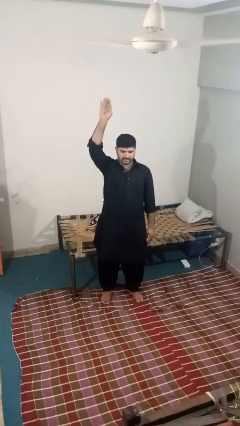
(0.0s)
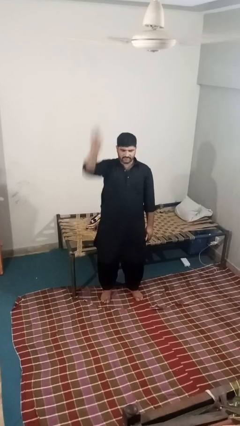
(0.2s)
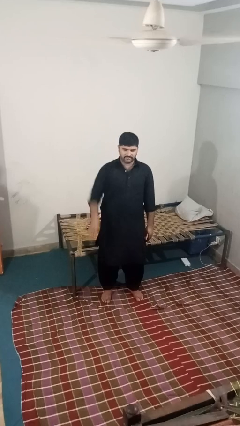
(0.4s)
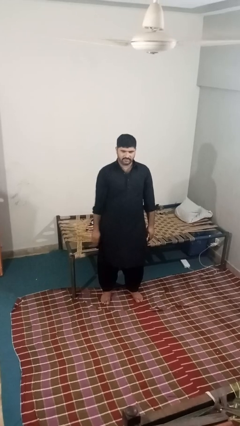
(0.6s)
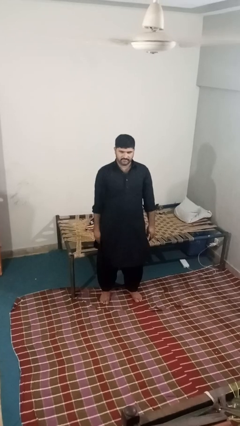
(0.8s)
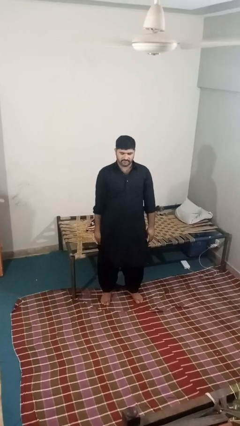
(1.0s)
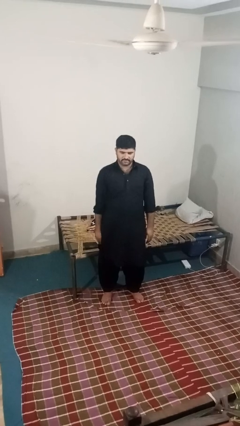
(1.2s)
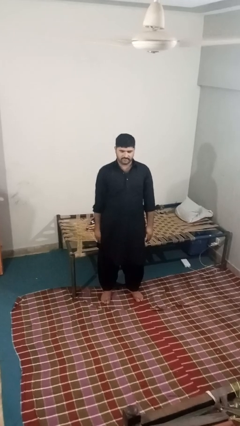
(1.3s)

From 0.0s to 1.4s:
person gestures lower hand

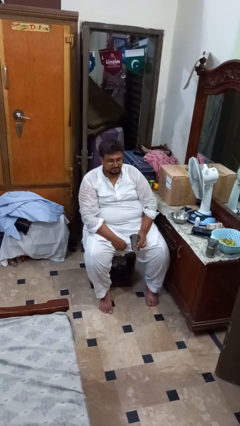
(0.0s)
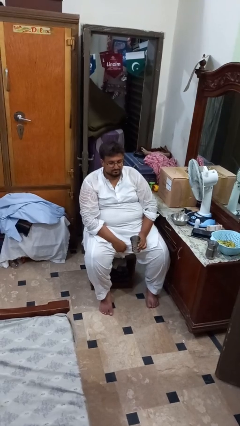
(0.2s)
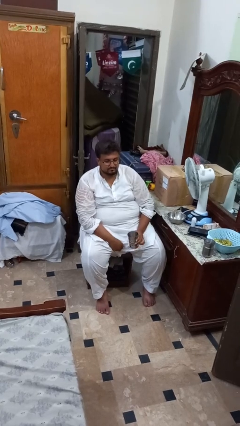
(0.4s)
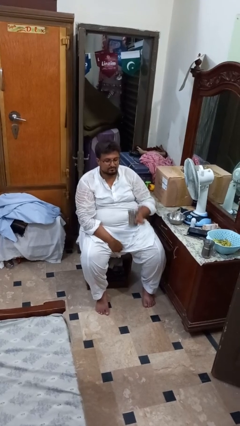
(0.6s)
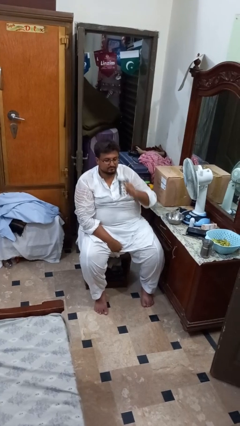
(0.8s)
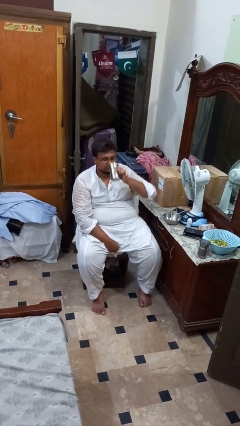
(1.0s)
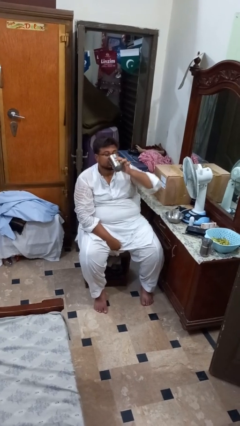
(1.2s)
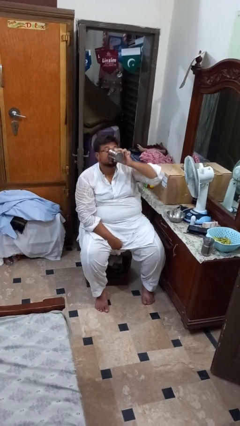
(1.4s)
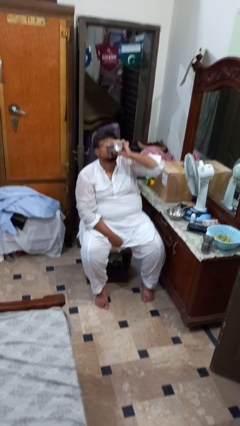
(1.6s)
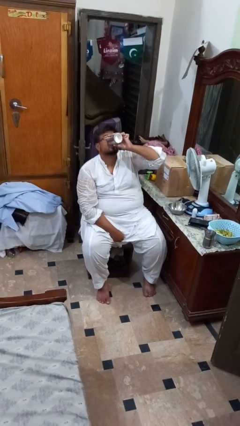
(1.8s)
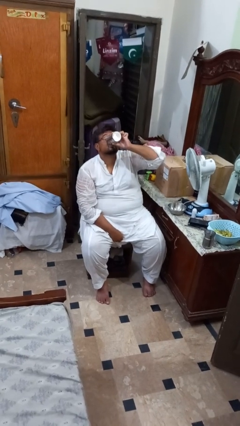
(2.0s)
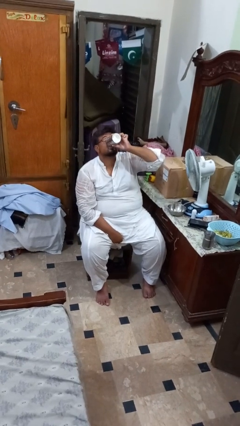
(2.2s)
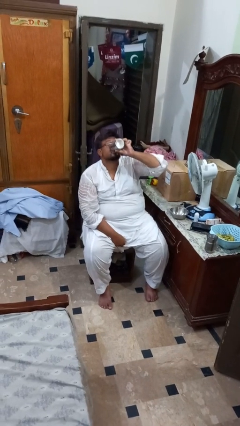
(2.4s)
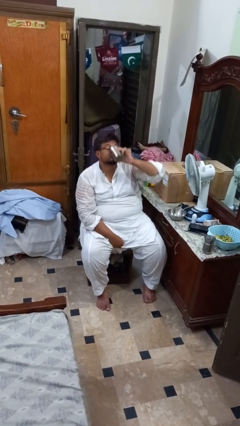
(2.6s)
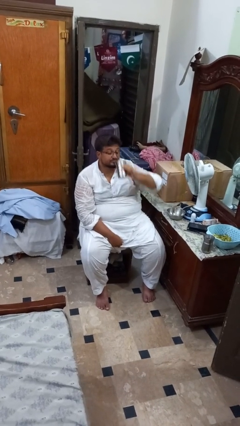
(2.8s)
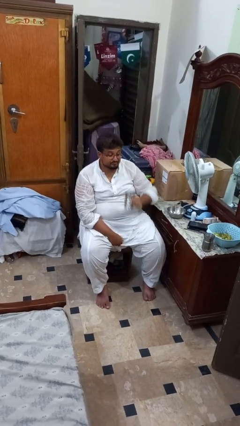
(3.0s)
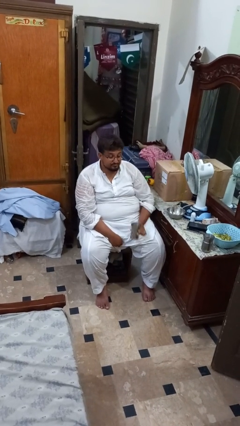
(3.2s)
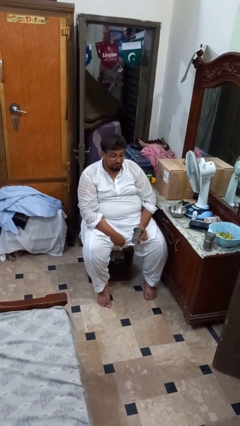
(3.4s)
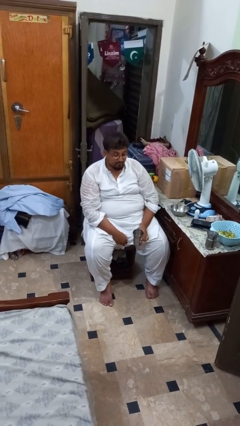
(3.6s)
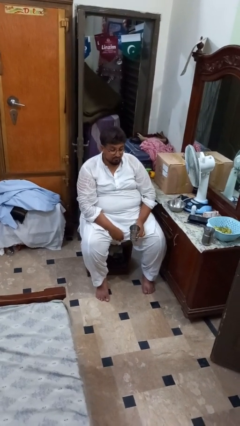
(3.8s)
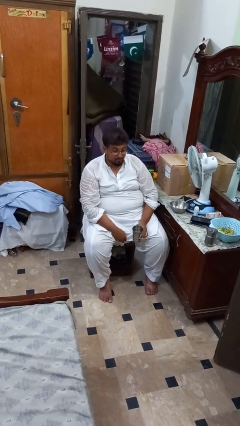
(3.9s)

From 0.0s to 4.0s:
person drinks from cup

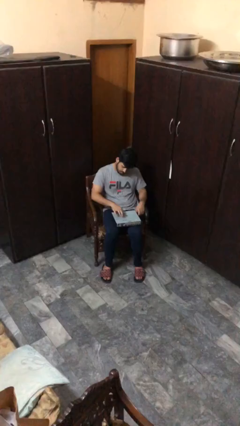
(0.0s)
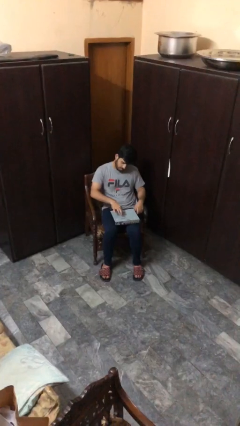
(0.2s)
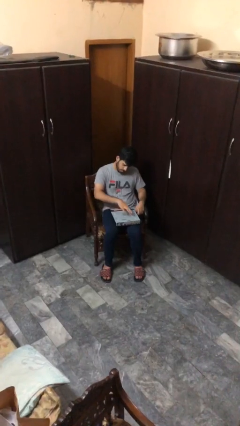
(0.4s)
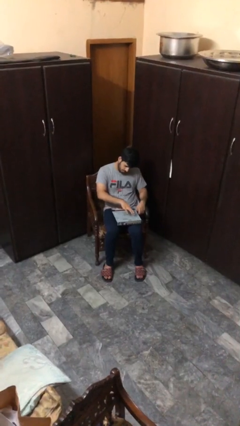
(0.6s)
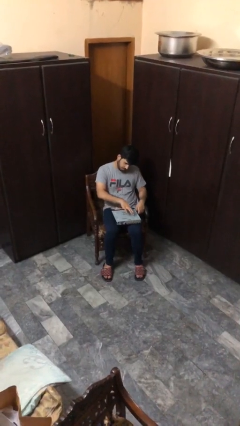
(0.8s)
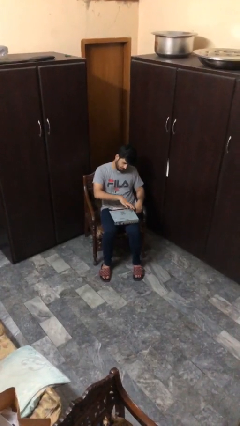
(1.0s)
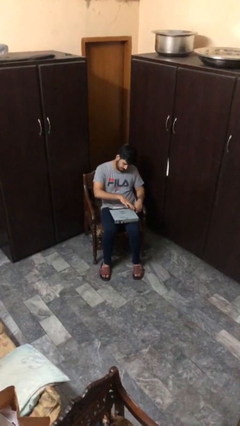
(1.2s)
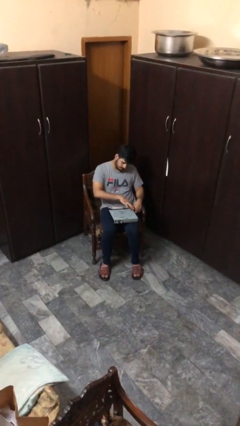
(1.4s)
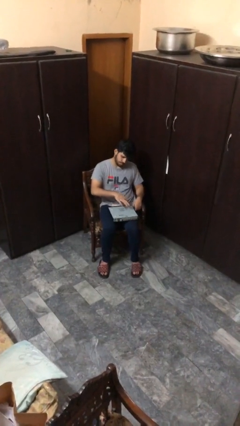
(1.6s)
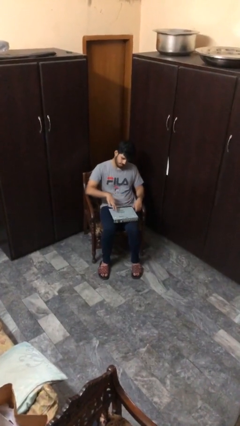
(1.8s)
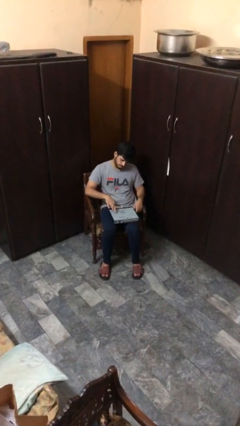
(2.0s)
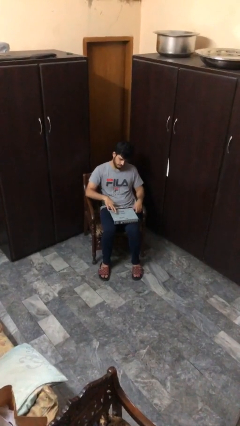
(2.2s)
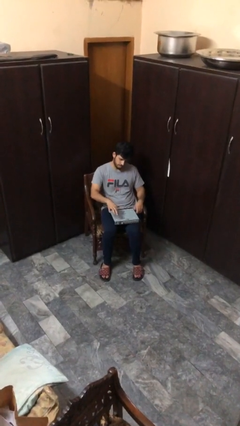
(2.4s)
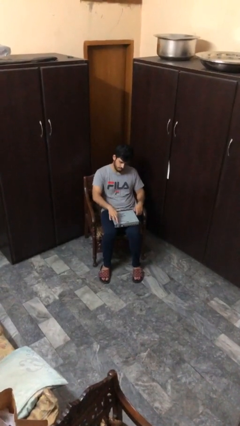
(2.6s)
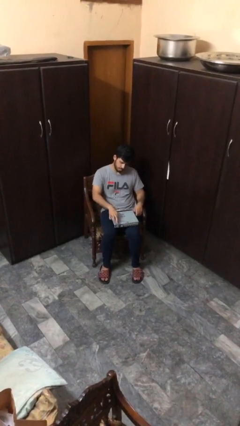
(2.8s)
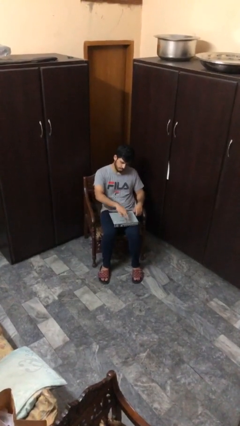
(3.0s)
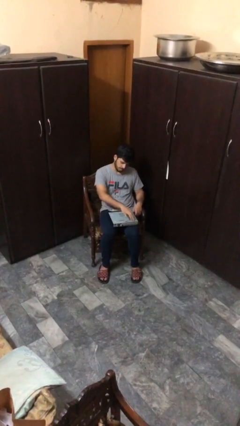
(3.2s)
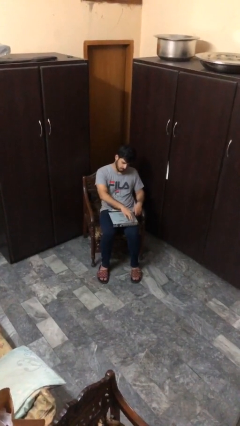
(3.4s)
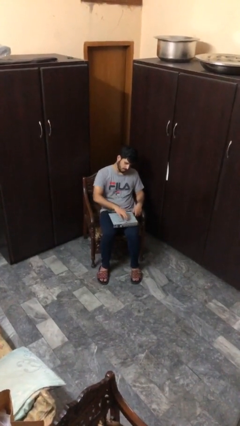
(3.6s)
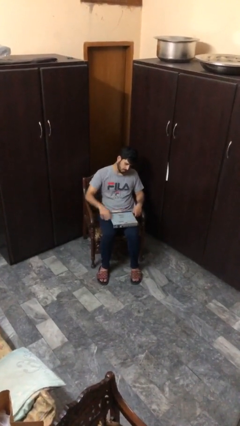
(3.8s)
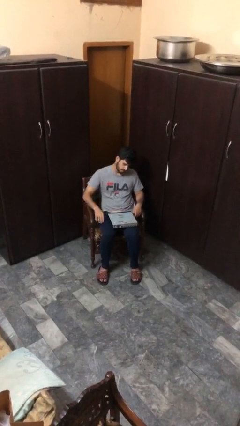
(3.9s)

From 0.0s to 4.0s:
person taps object with finger

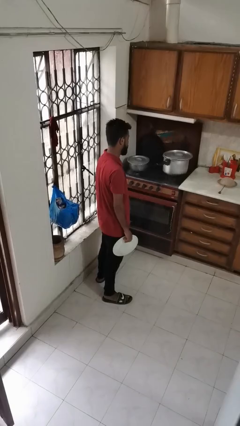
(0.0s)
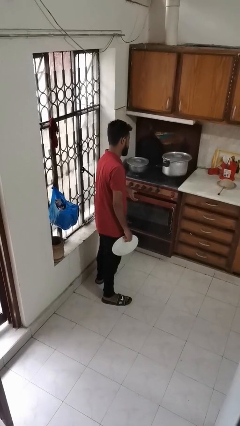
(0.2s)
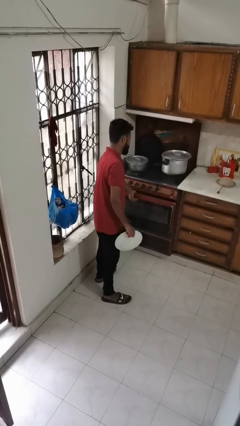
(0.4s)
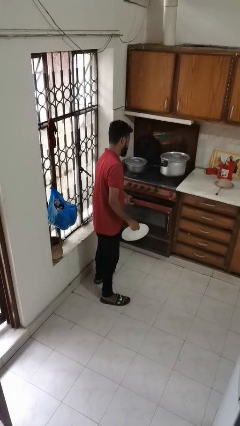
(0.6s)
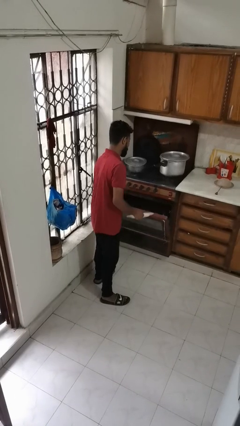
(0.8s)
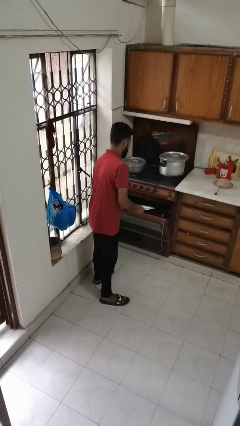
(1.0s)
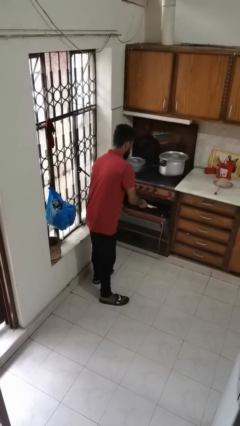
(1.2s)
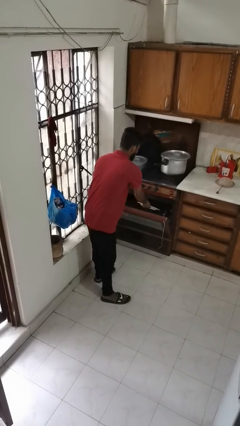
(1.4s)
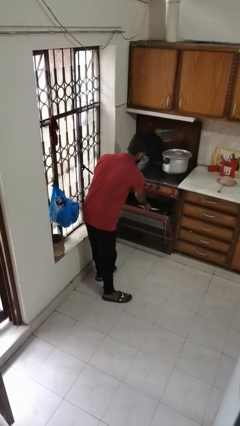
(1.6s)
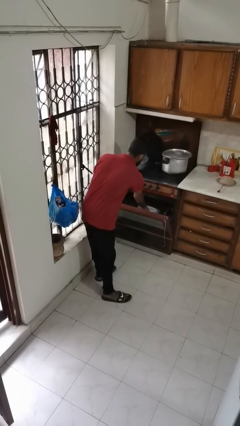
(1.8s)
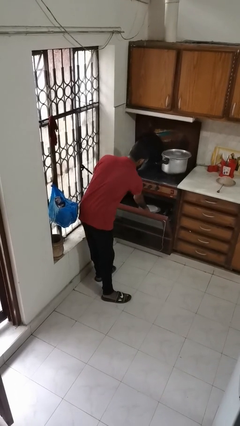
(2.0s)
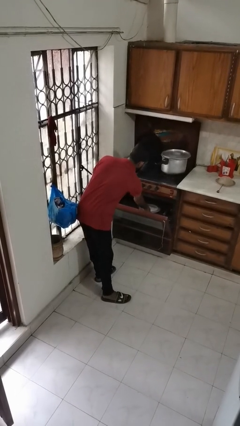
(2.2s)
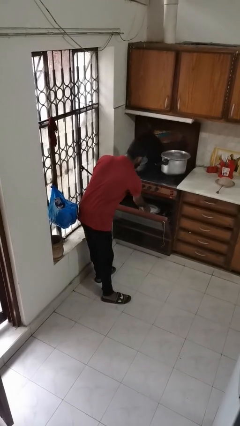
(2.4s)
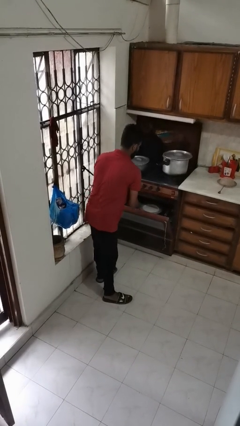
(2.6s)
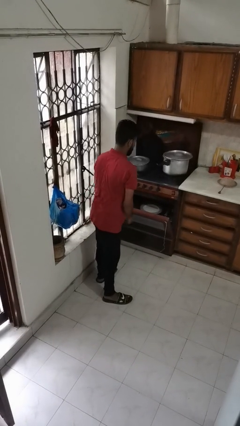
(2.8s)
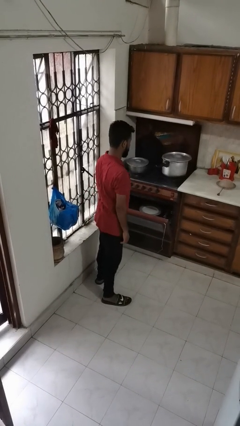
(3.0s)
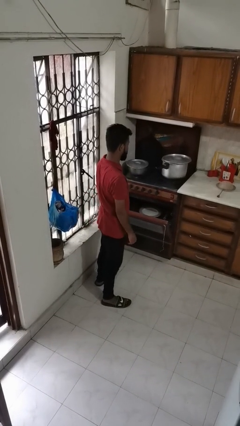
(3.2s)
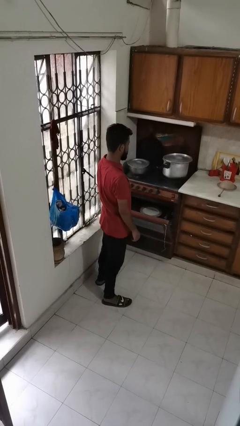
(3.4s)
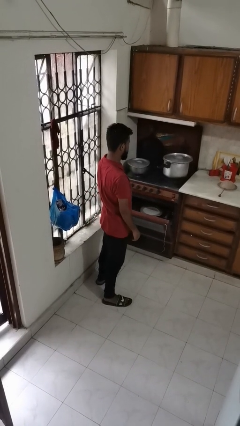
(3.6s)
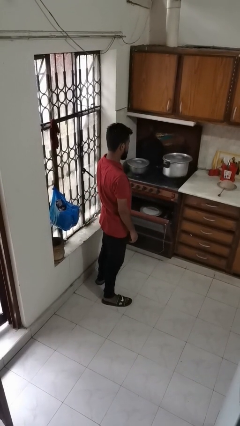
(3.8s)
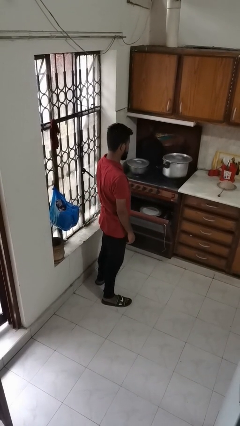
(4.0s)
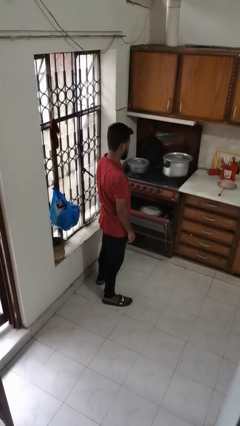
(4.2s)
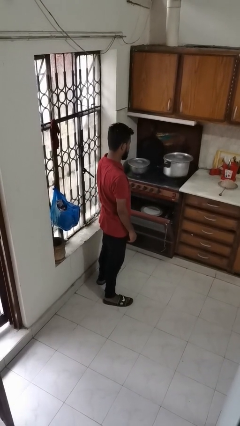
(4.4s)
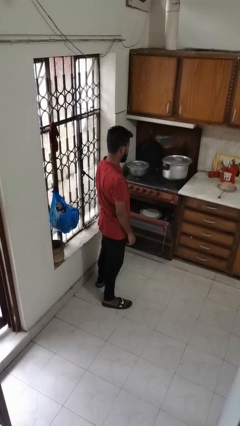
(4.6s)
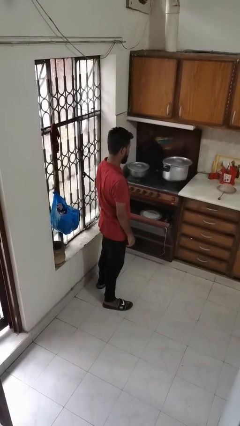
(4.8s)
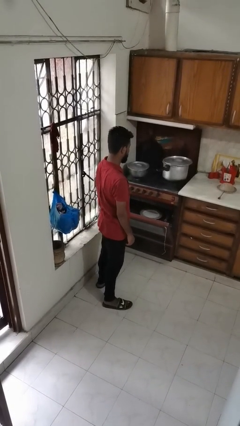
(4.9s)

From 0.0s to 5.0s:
person puts object into oven

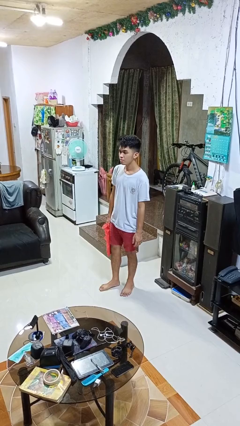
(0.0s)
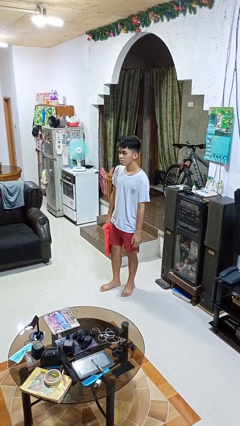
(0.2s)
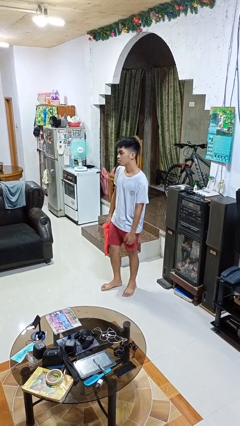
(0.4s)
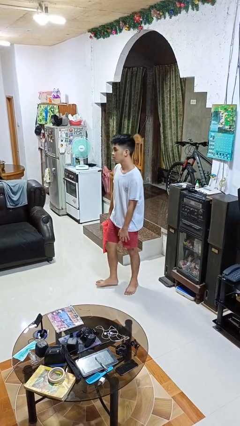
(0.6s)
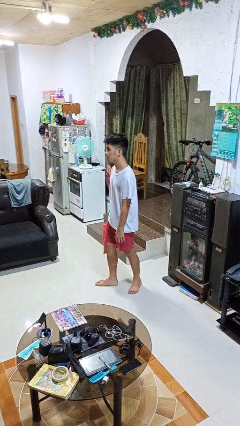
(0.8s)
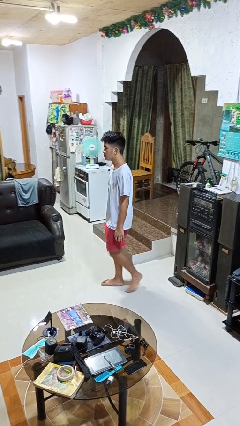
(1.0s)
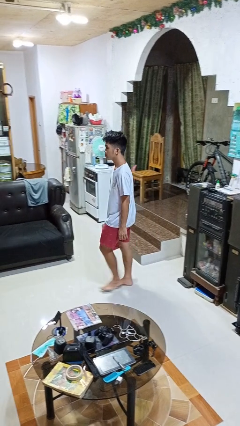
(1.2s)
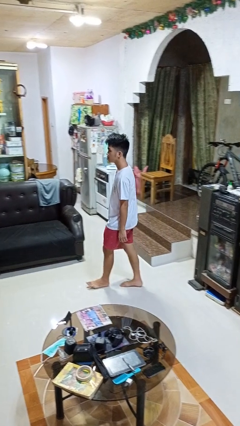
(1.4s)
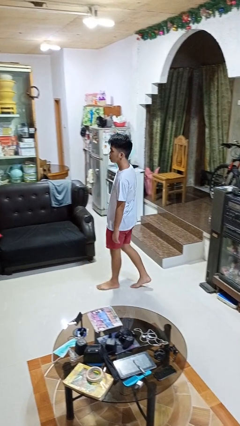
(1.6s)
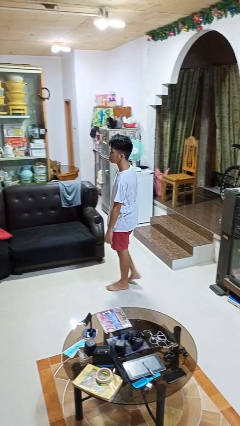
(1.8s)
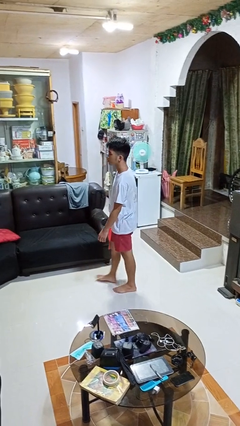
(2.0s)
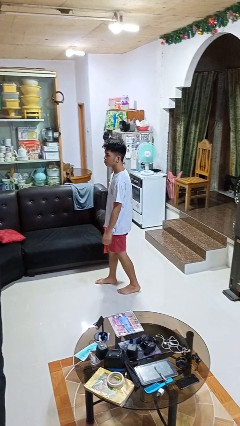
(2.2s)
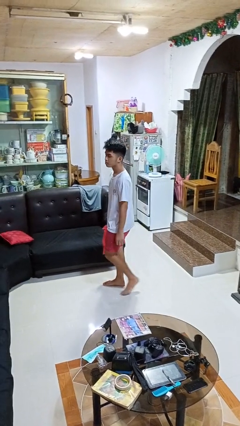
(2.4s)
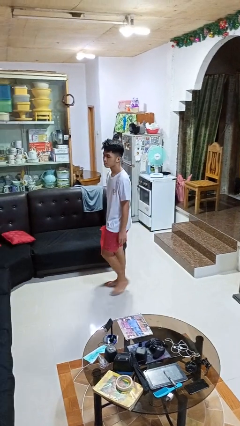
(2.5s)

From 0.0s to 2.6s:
person carries groceries

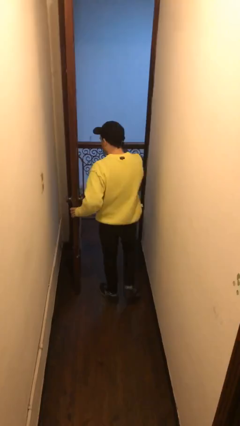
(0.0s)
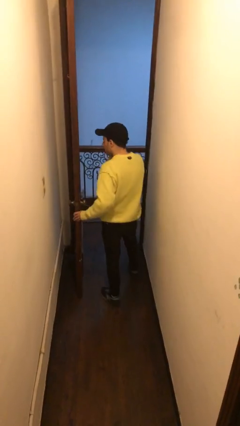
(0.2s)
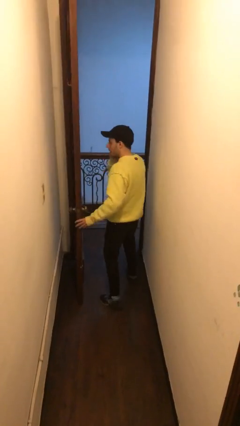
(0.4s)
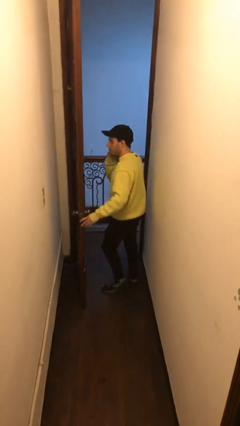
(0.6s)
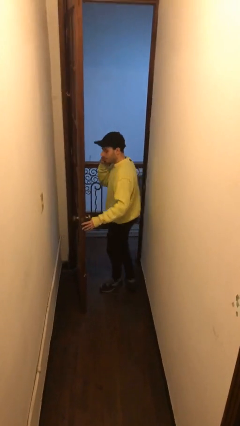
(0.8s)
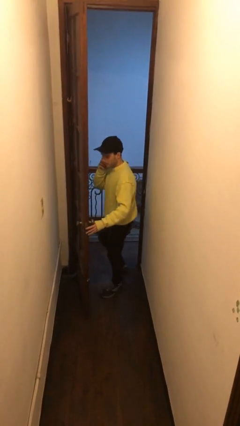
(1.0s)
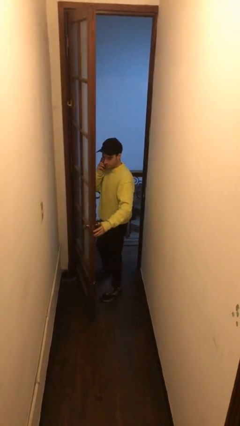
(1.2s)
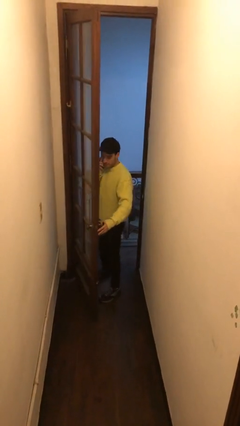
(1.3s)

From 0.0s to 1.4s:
person exits scene through structure
